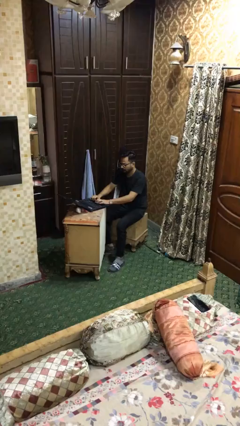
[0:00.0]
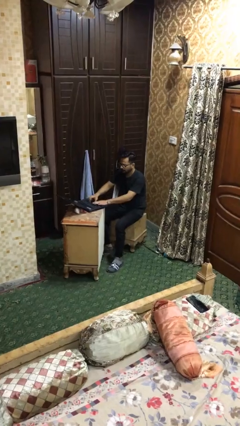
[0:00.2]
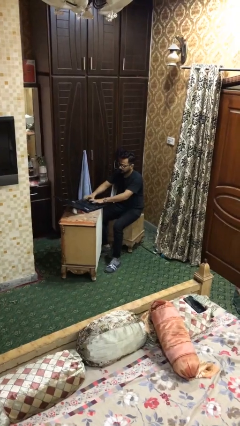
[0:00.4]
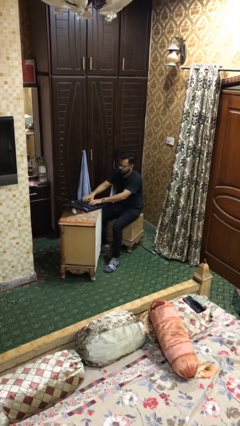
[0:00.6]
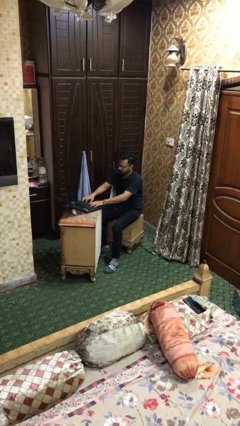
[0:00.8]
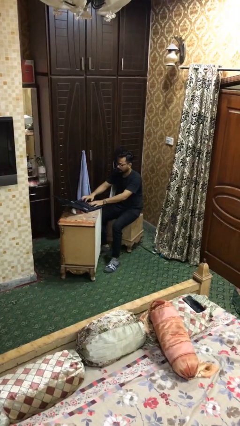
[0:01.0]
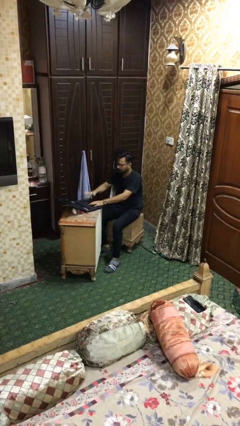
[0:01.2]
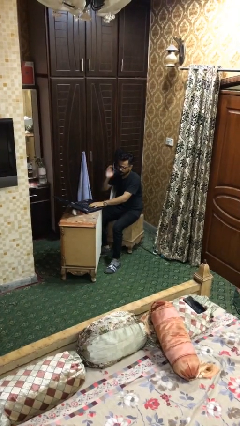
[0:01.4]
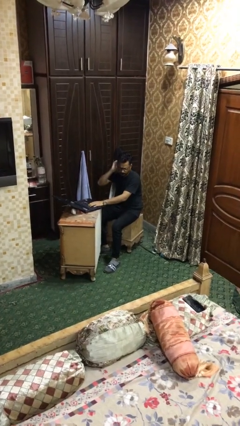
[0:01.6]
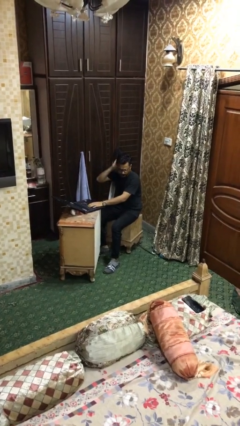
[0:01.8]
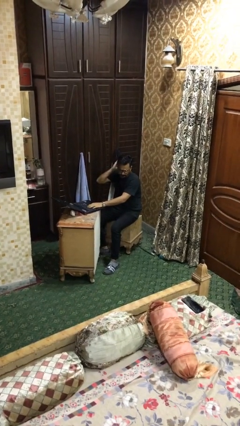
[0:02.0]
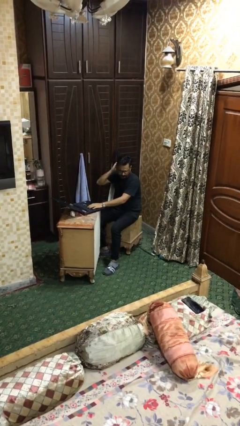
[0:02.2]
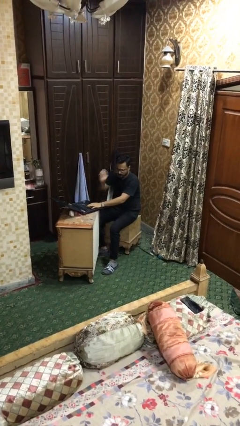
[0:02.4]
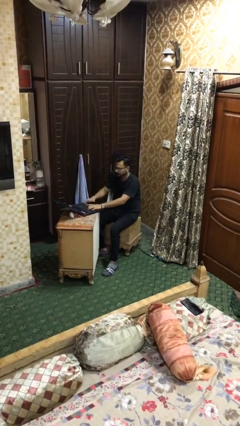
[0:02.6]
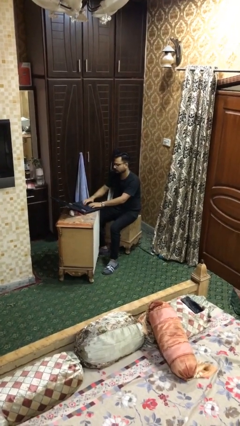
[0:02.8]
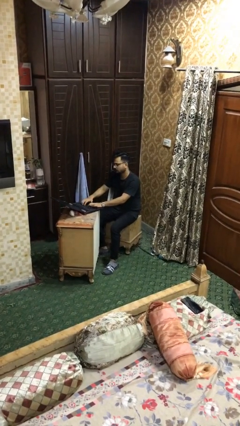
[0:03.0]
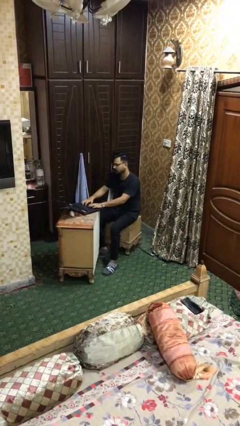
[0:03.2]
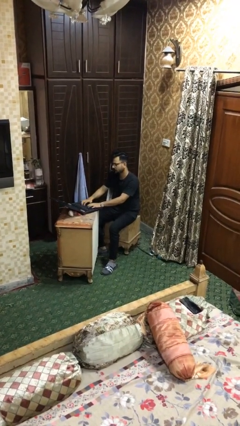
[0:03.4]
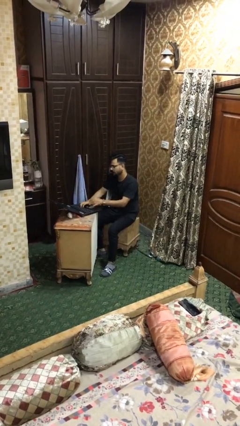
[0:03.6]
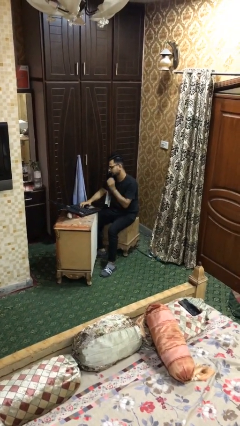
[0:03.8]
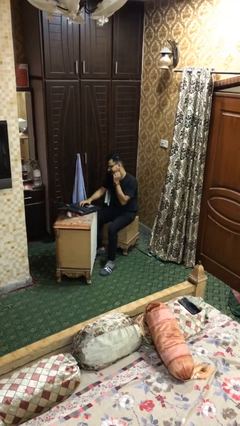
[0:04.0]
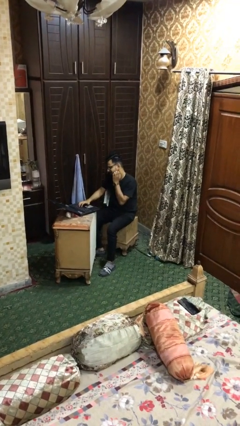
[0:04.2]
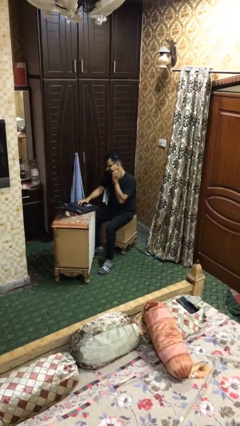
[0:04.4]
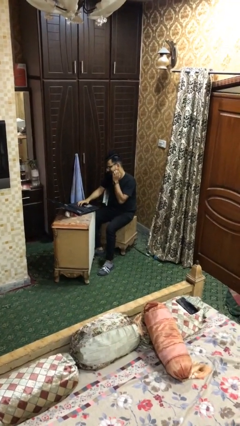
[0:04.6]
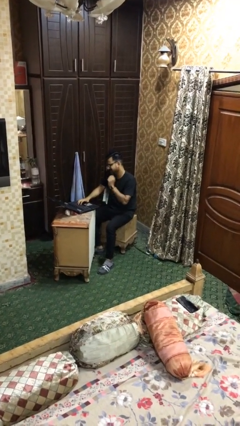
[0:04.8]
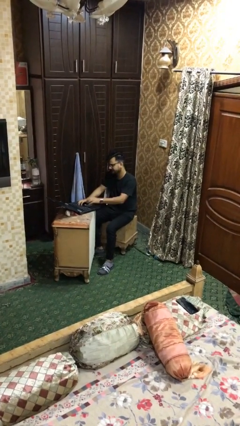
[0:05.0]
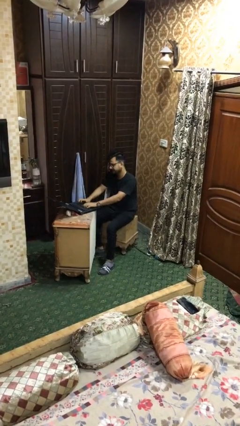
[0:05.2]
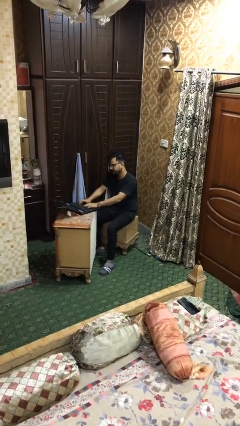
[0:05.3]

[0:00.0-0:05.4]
person interacts with laptop

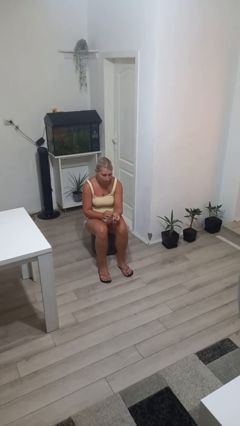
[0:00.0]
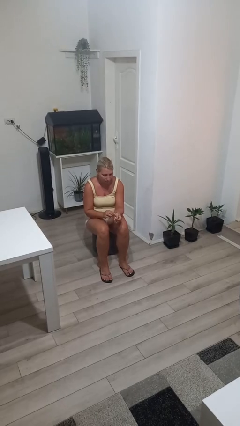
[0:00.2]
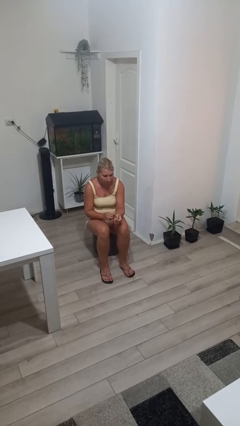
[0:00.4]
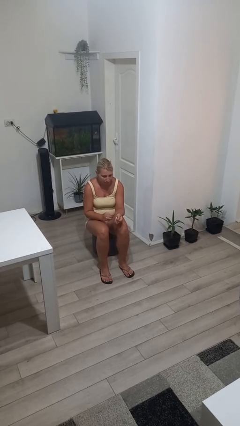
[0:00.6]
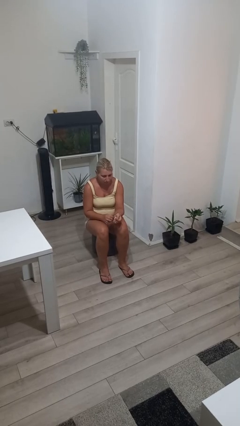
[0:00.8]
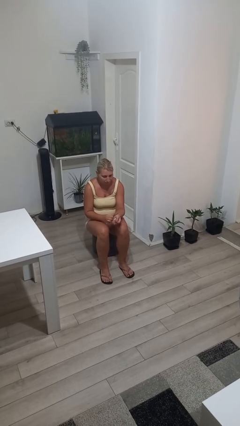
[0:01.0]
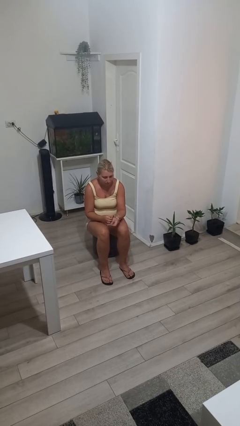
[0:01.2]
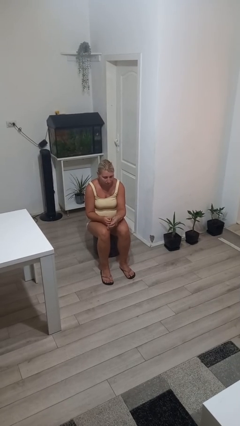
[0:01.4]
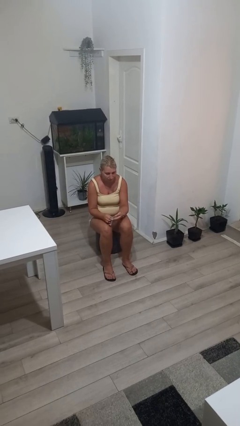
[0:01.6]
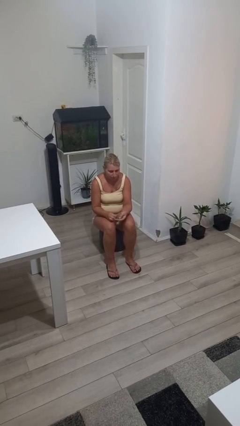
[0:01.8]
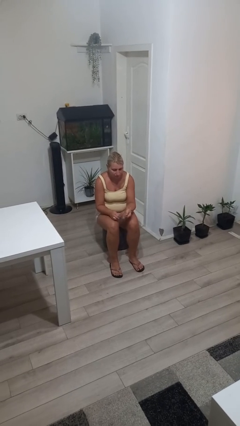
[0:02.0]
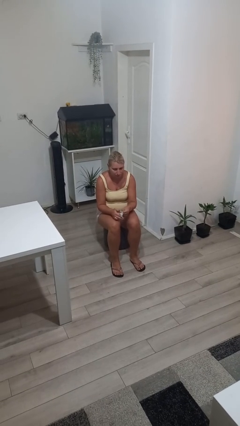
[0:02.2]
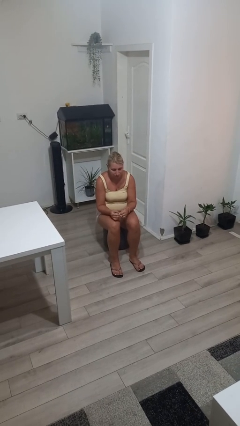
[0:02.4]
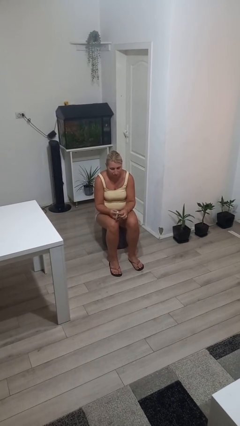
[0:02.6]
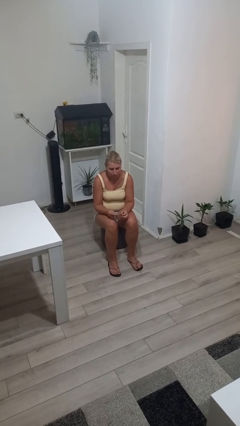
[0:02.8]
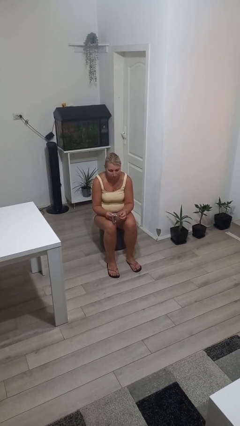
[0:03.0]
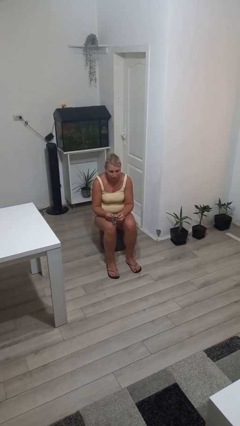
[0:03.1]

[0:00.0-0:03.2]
person takes off wristwatch

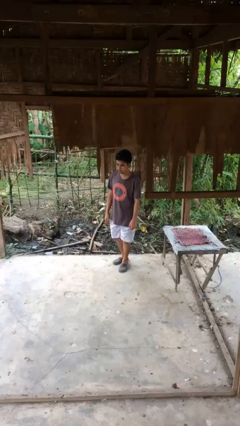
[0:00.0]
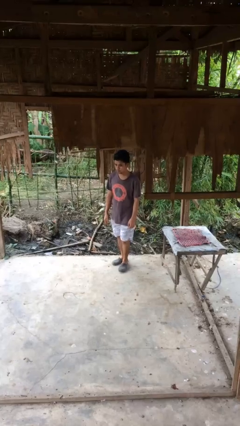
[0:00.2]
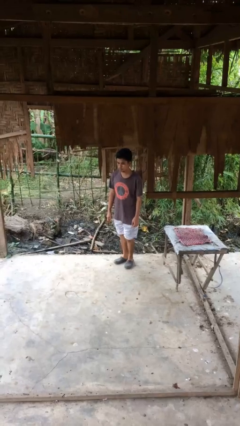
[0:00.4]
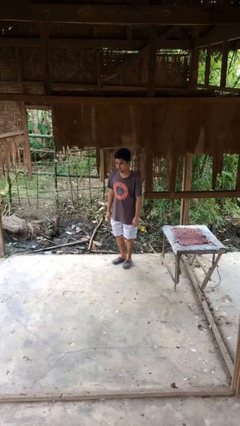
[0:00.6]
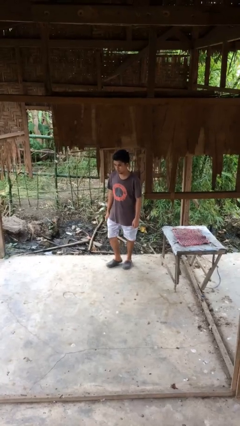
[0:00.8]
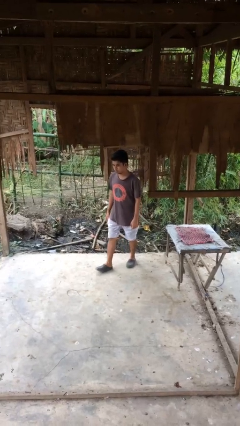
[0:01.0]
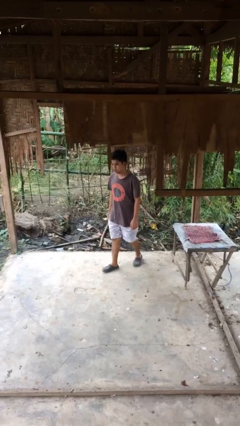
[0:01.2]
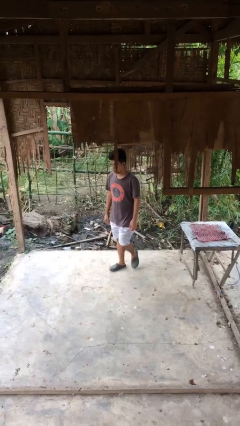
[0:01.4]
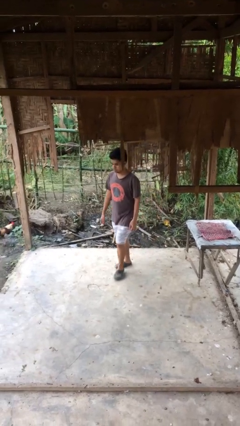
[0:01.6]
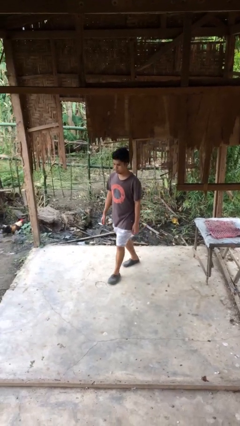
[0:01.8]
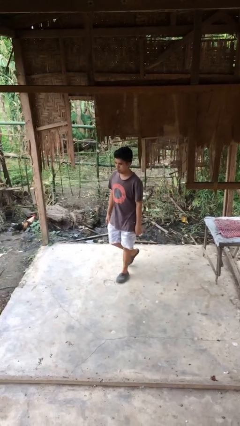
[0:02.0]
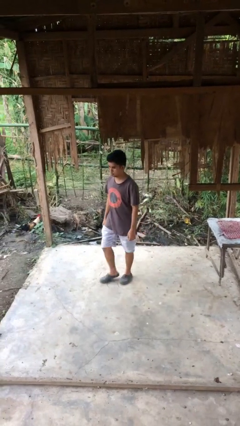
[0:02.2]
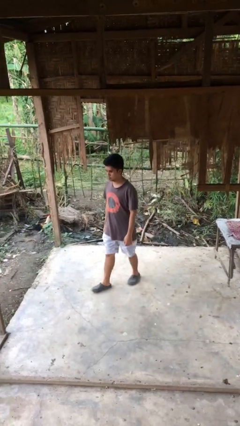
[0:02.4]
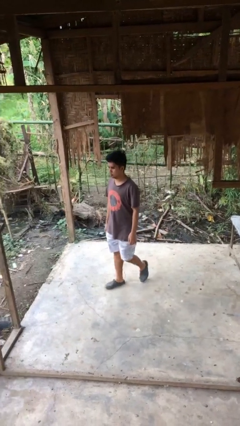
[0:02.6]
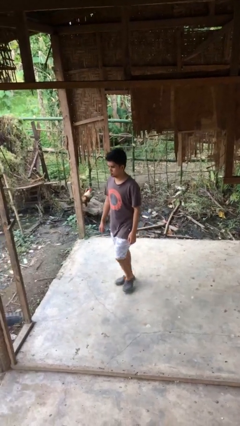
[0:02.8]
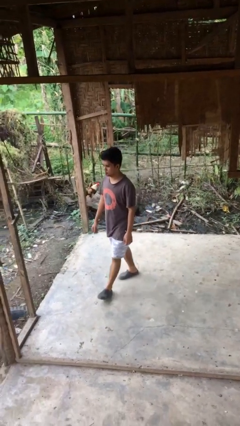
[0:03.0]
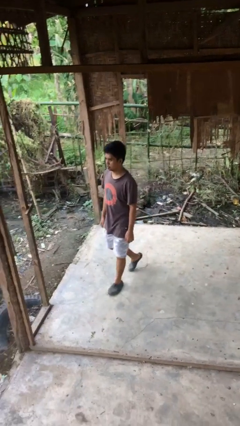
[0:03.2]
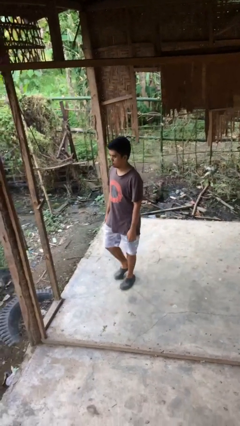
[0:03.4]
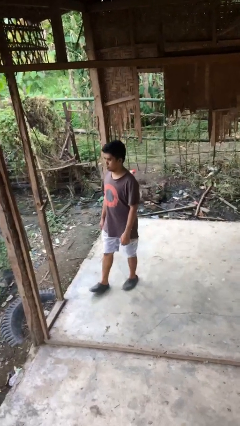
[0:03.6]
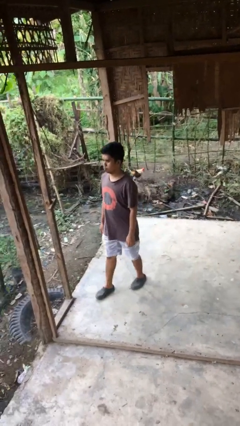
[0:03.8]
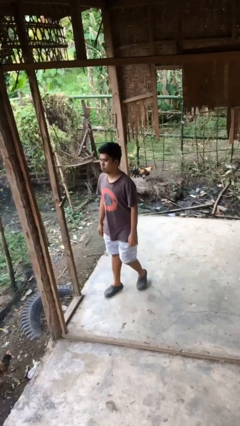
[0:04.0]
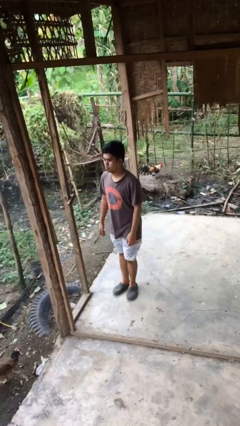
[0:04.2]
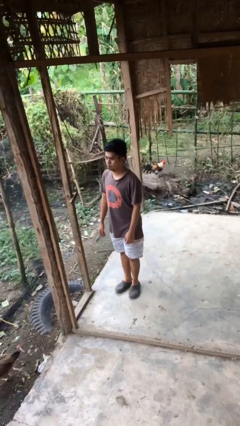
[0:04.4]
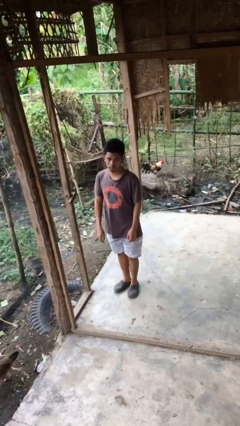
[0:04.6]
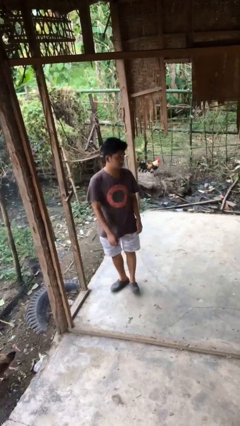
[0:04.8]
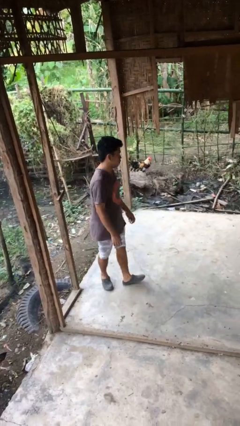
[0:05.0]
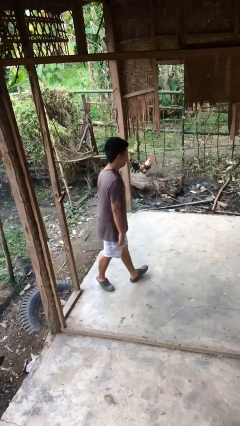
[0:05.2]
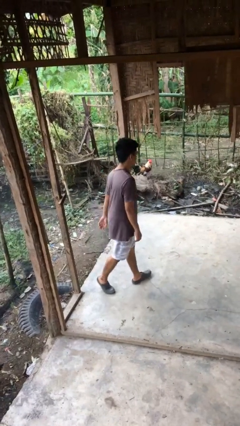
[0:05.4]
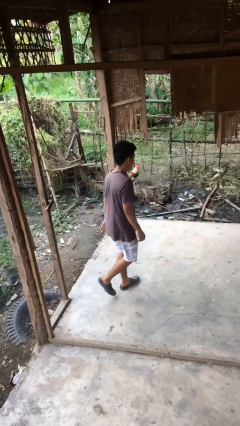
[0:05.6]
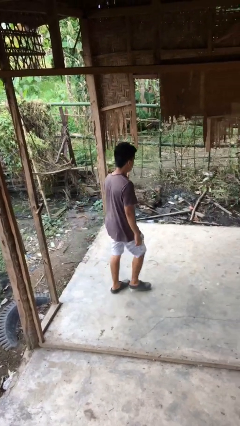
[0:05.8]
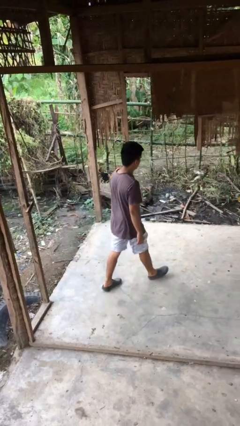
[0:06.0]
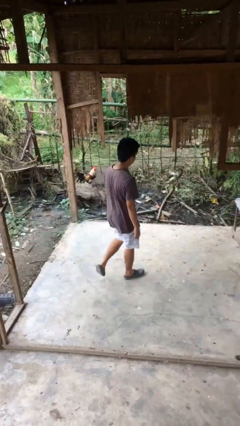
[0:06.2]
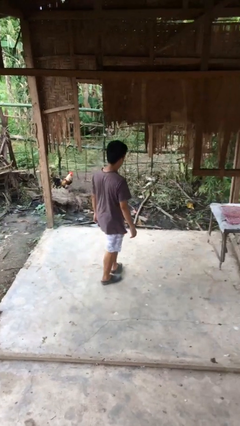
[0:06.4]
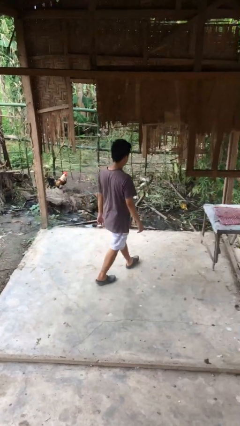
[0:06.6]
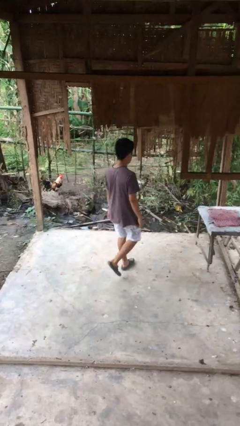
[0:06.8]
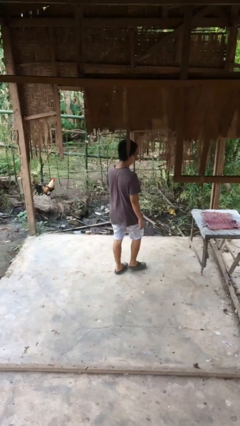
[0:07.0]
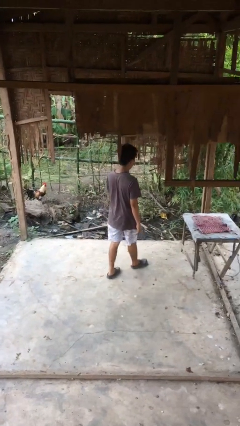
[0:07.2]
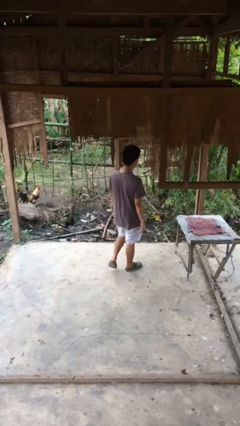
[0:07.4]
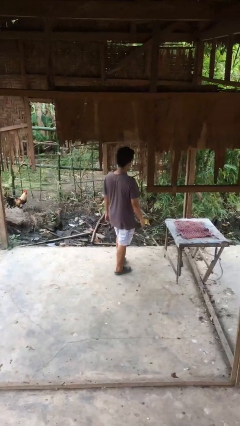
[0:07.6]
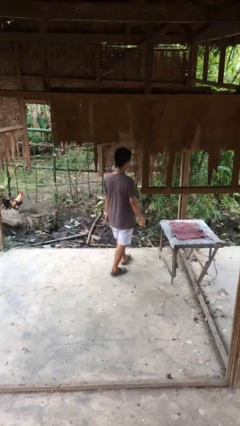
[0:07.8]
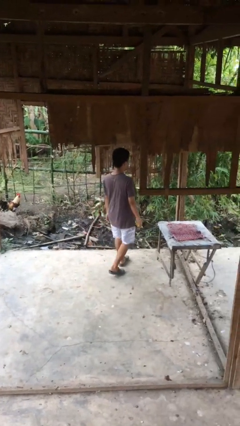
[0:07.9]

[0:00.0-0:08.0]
person walks

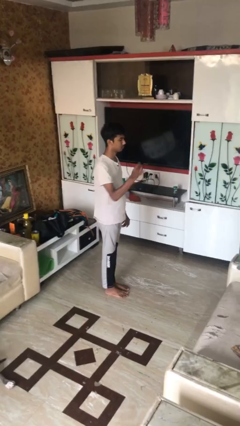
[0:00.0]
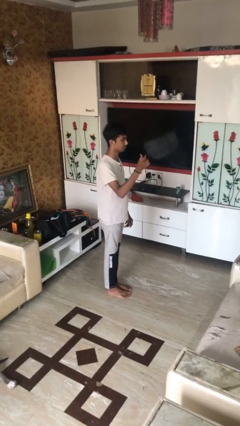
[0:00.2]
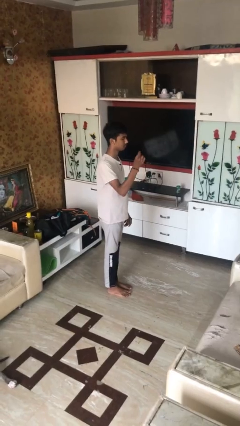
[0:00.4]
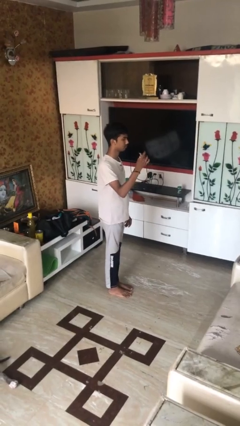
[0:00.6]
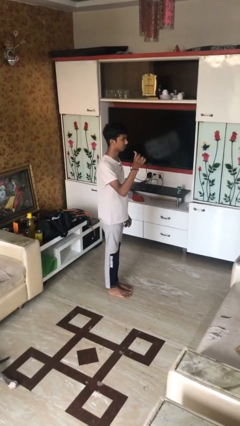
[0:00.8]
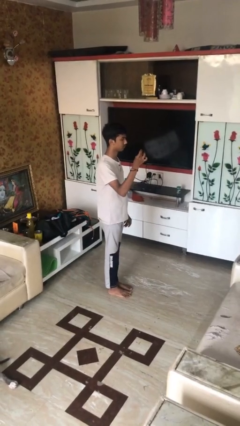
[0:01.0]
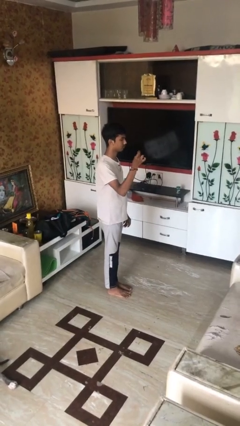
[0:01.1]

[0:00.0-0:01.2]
person snaps fingers
